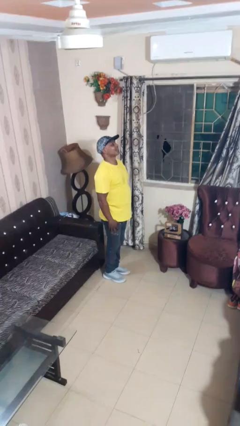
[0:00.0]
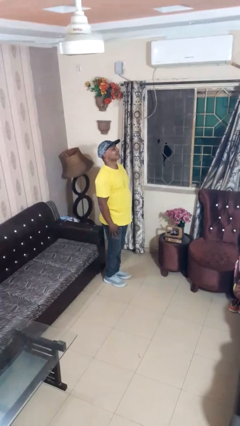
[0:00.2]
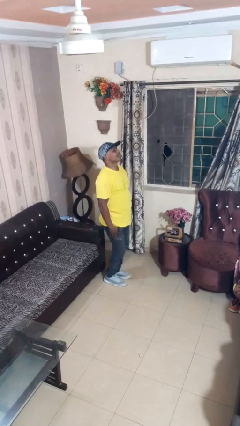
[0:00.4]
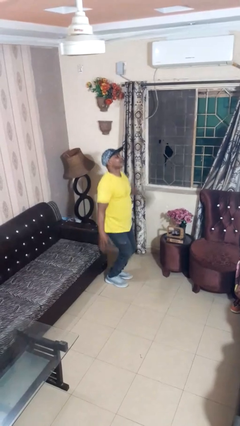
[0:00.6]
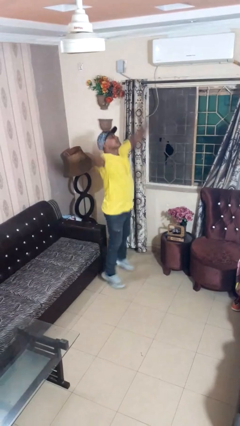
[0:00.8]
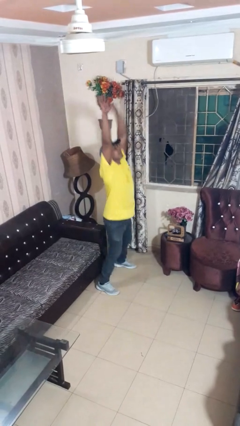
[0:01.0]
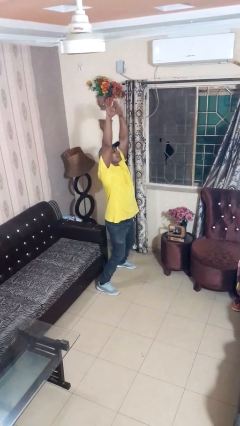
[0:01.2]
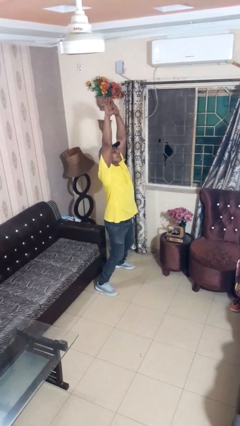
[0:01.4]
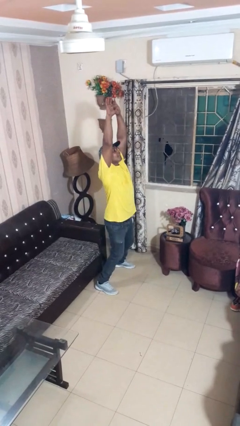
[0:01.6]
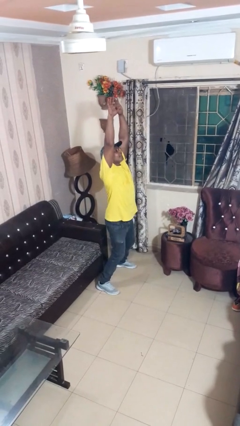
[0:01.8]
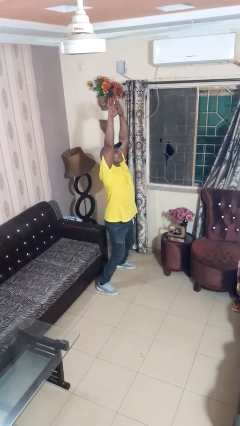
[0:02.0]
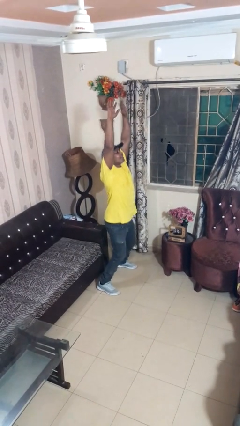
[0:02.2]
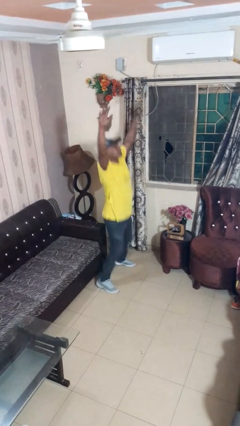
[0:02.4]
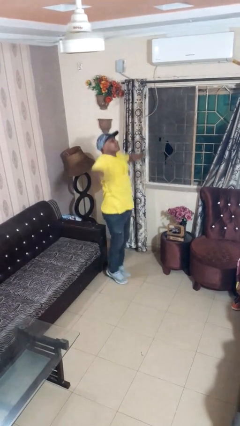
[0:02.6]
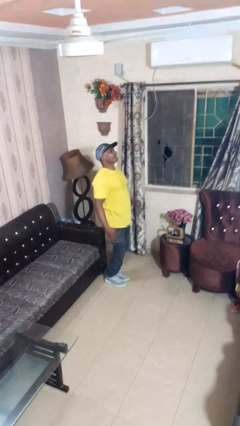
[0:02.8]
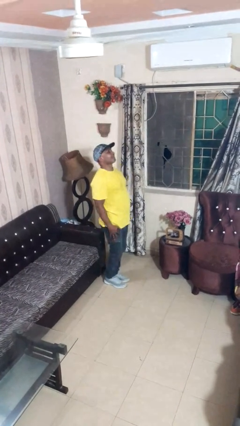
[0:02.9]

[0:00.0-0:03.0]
person exercises with jumping jacks

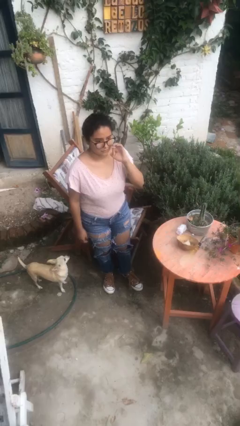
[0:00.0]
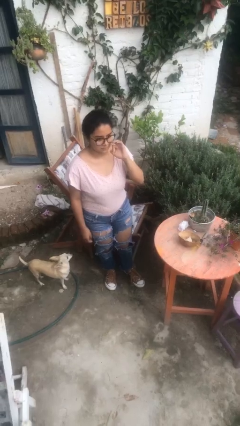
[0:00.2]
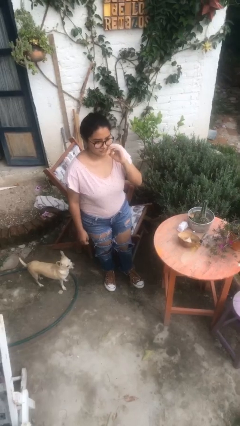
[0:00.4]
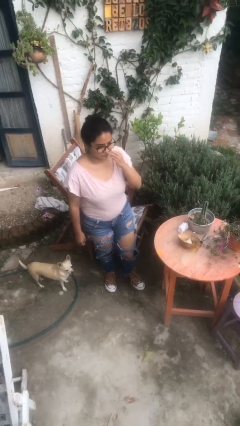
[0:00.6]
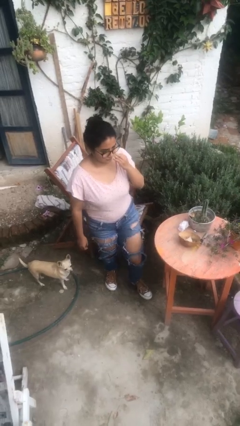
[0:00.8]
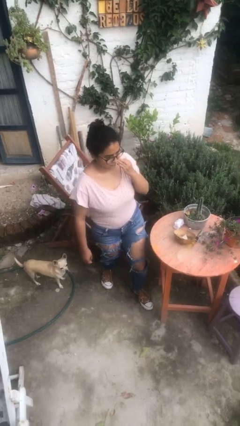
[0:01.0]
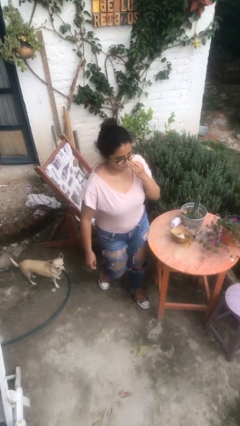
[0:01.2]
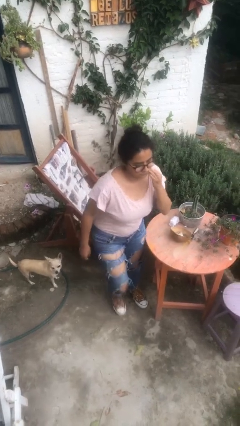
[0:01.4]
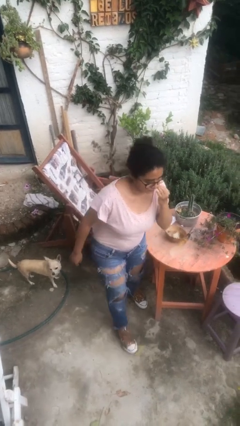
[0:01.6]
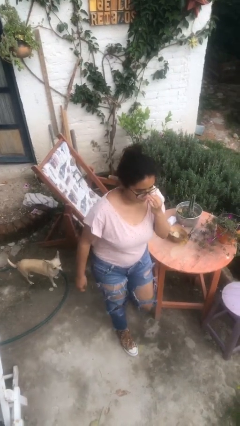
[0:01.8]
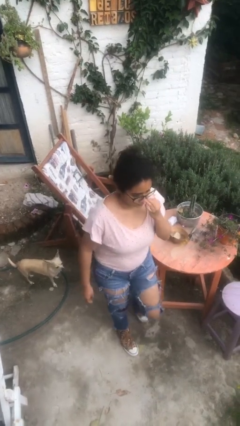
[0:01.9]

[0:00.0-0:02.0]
person bumps into table

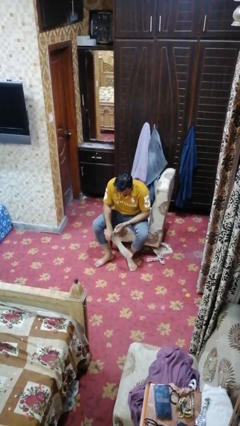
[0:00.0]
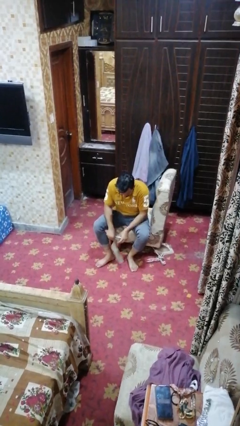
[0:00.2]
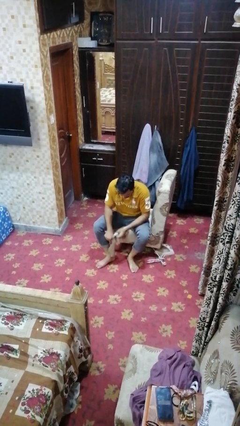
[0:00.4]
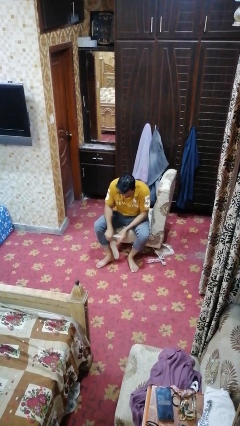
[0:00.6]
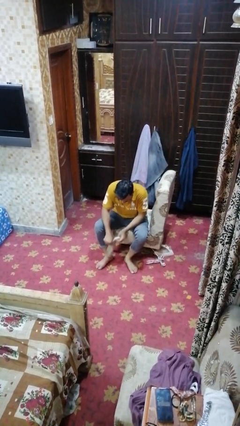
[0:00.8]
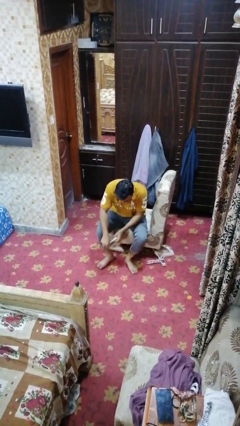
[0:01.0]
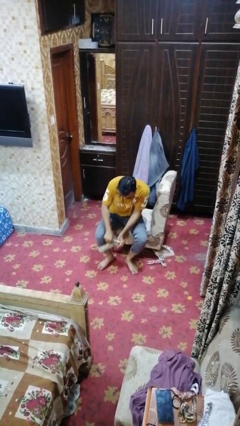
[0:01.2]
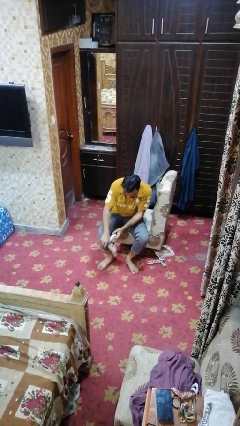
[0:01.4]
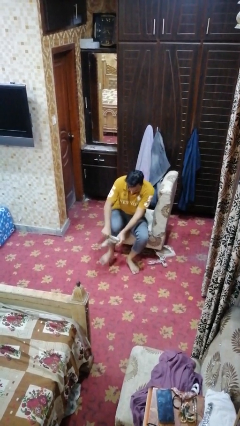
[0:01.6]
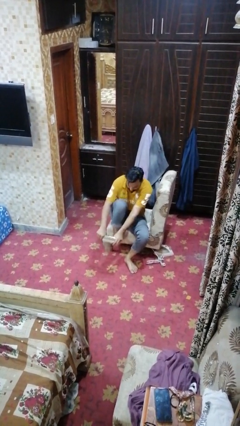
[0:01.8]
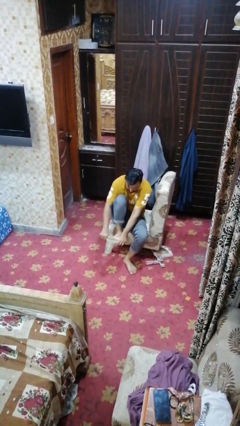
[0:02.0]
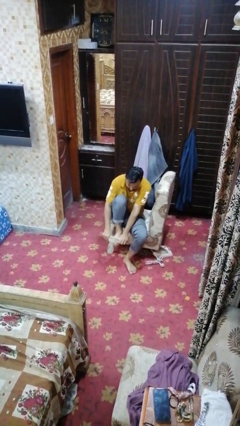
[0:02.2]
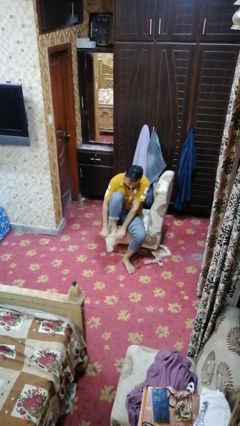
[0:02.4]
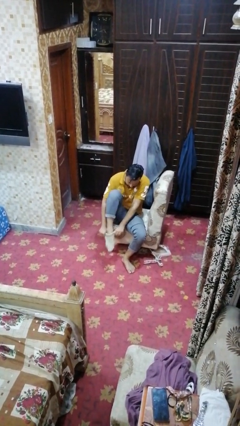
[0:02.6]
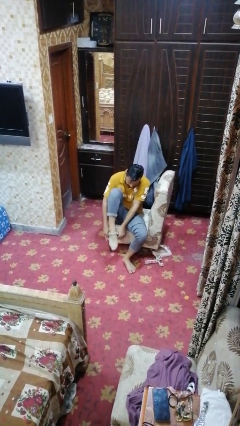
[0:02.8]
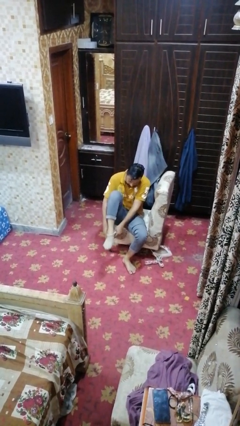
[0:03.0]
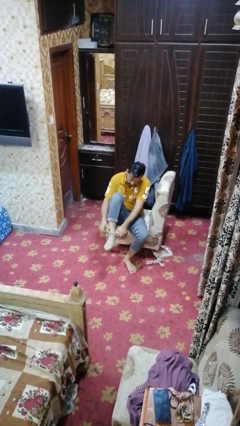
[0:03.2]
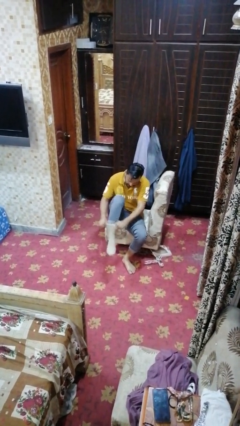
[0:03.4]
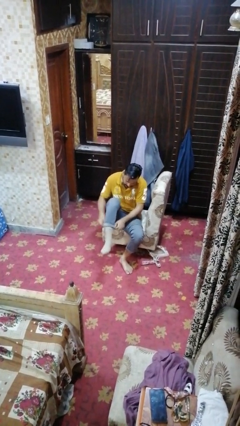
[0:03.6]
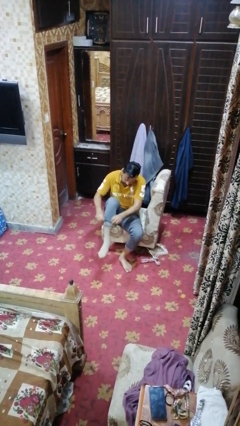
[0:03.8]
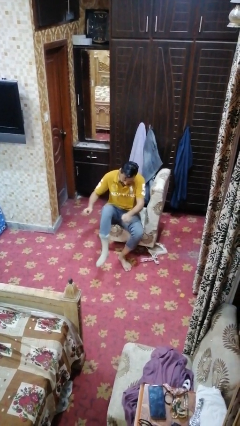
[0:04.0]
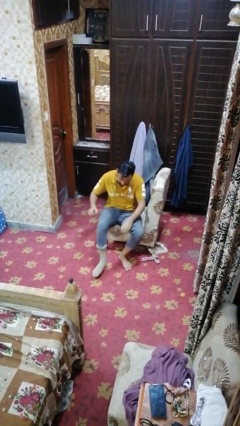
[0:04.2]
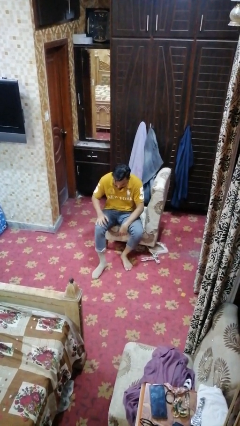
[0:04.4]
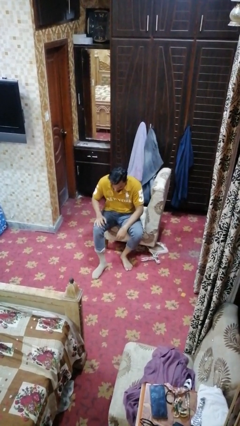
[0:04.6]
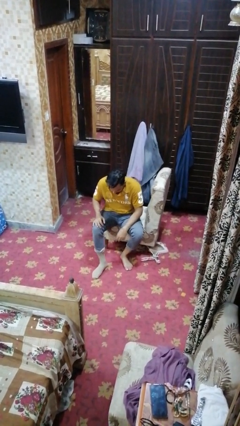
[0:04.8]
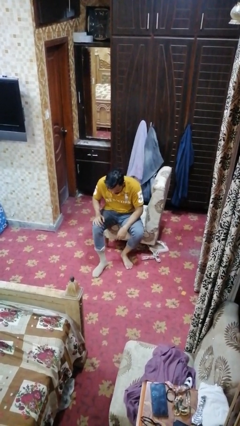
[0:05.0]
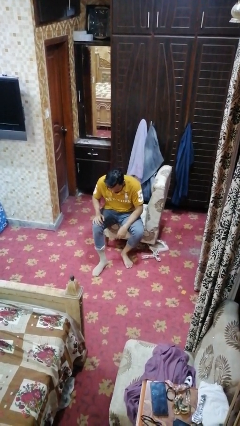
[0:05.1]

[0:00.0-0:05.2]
person puts on socks

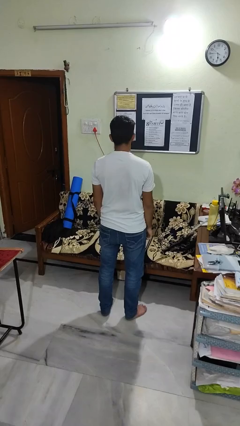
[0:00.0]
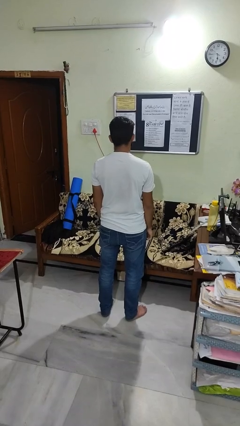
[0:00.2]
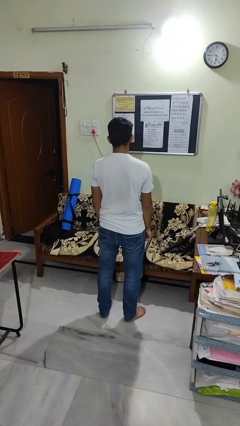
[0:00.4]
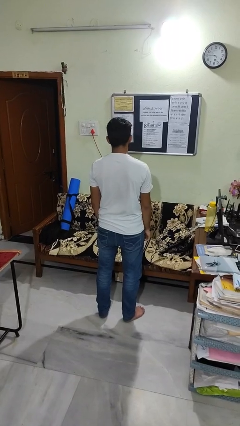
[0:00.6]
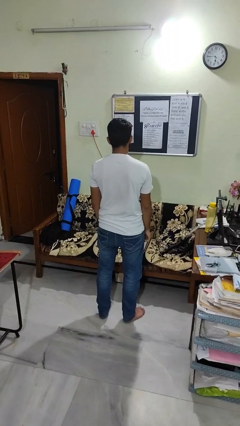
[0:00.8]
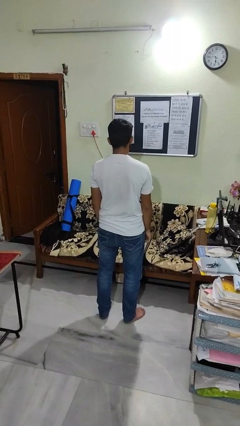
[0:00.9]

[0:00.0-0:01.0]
person gestures number one

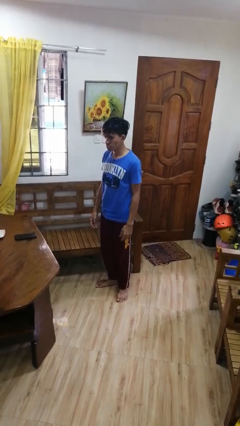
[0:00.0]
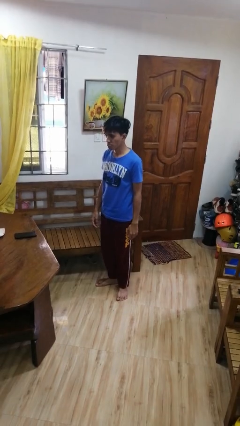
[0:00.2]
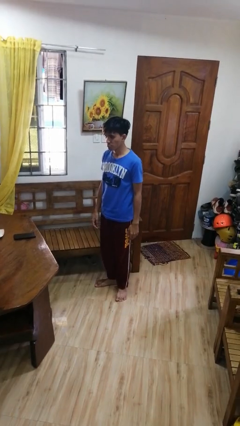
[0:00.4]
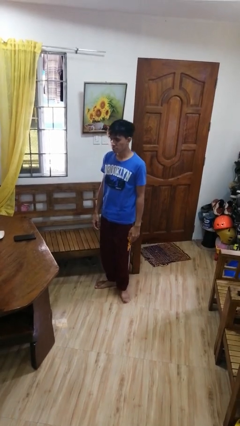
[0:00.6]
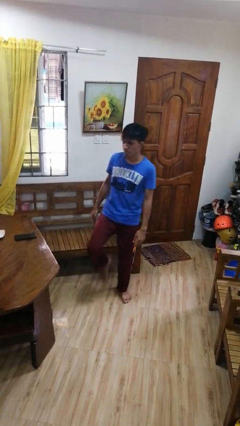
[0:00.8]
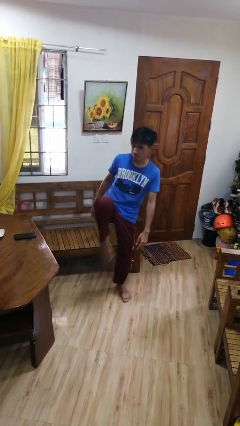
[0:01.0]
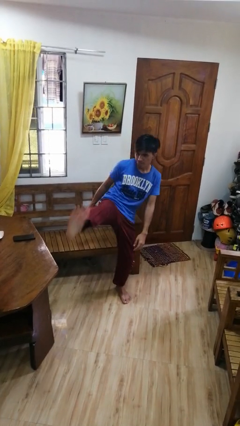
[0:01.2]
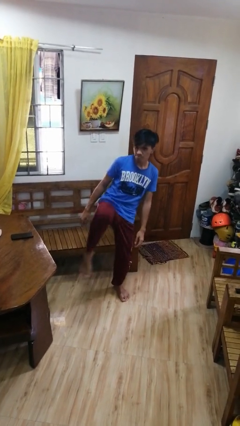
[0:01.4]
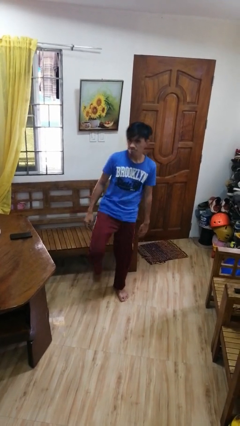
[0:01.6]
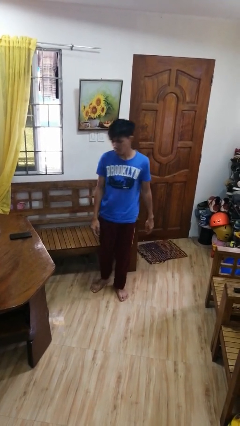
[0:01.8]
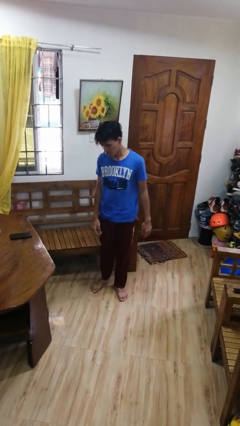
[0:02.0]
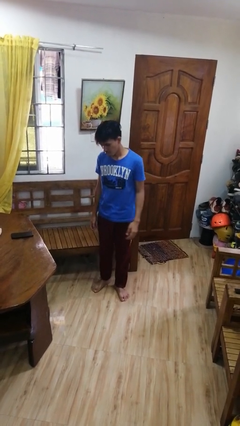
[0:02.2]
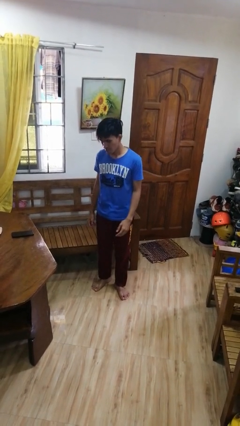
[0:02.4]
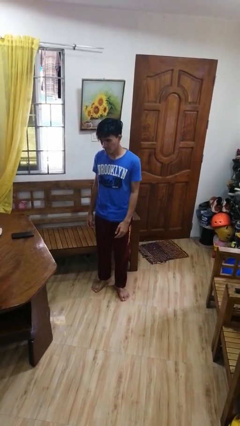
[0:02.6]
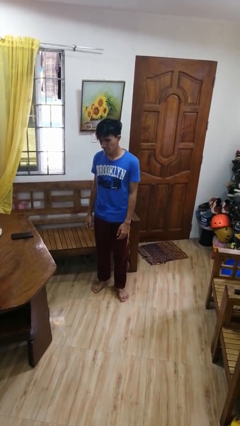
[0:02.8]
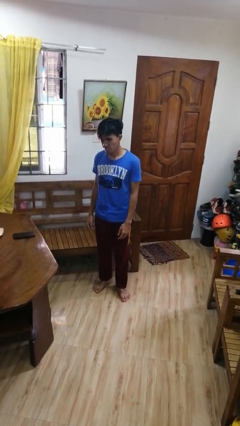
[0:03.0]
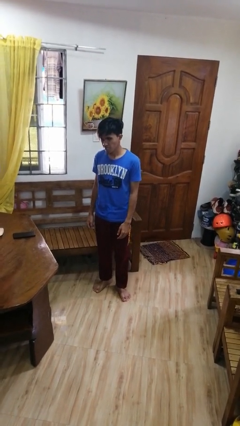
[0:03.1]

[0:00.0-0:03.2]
person karate kicks

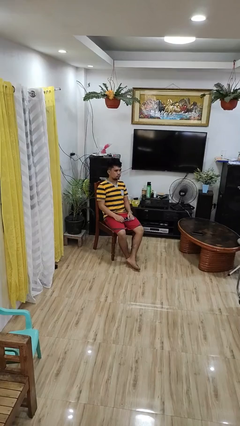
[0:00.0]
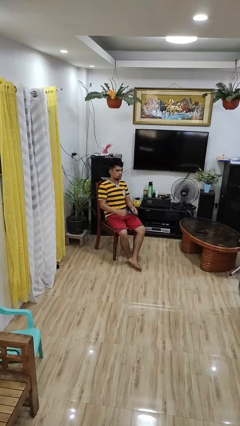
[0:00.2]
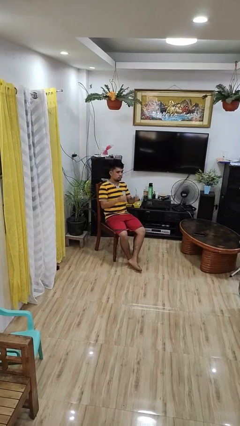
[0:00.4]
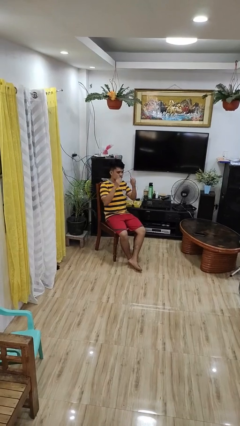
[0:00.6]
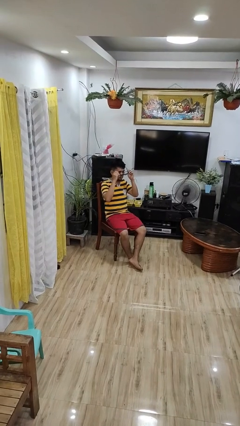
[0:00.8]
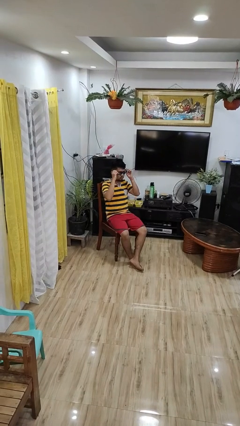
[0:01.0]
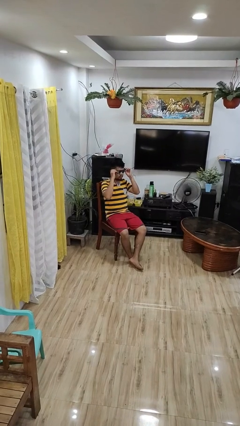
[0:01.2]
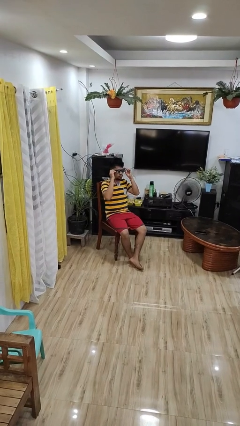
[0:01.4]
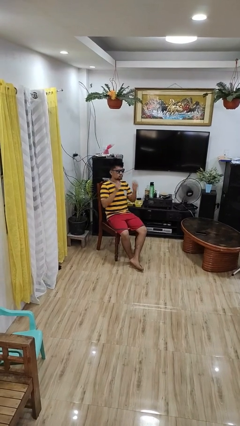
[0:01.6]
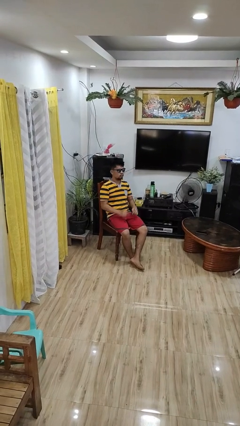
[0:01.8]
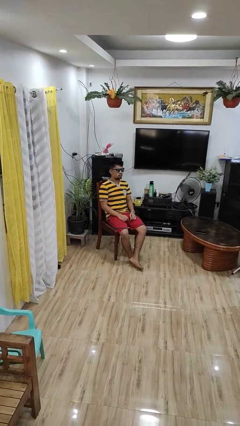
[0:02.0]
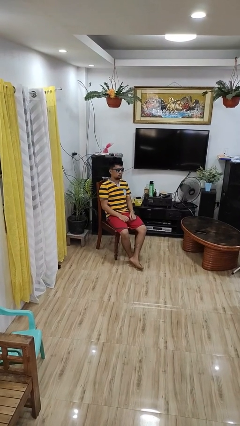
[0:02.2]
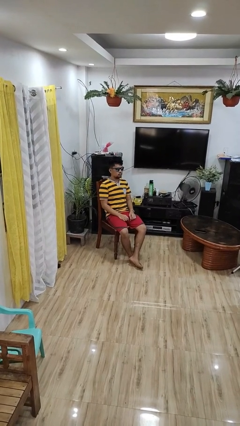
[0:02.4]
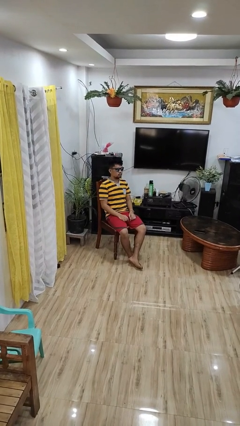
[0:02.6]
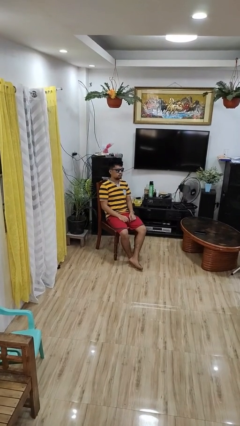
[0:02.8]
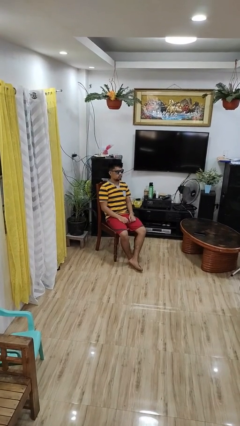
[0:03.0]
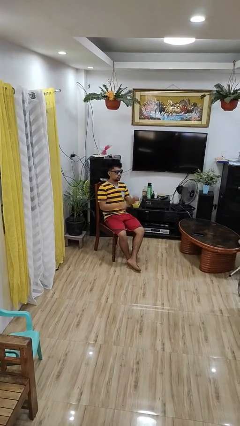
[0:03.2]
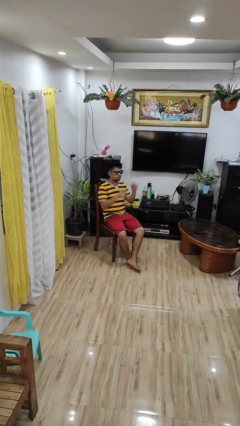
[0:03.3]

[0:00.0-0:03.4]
person puts on sunglasses
